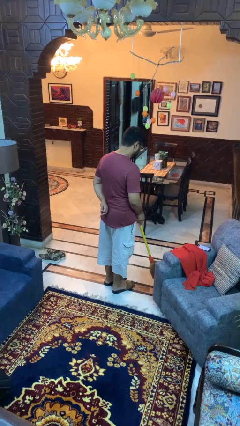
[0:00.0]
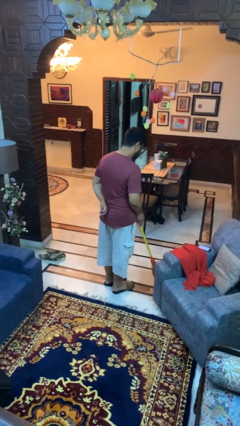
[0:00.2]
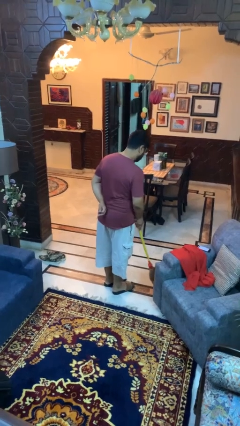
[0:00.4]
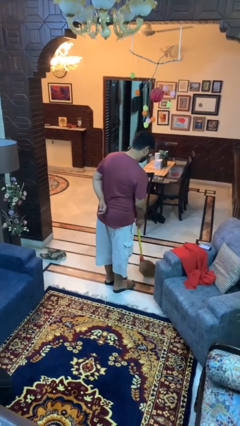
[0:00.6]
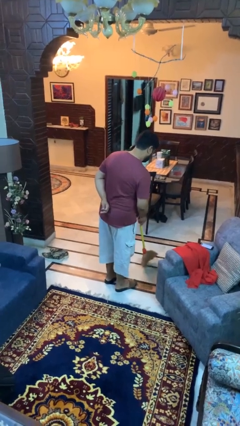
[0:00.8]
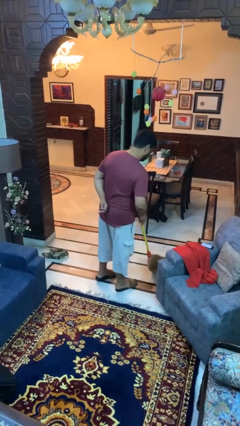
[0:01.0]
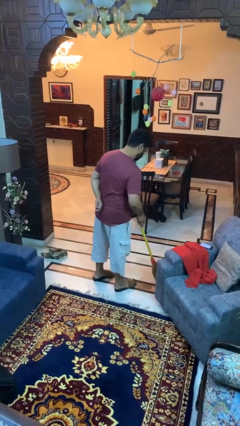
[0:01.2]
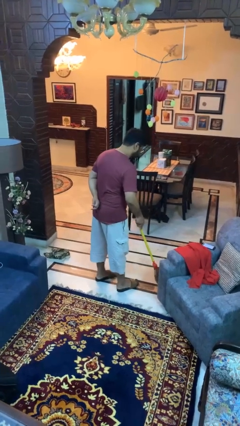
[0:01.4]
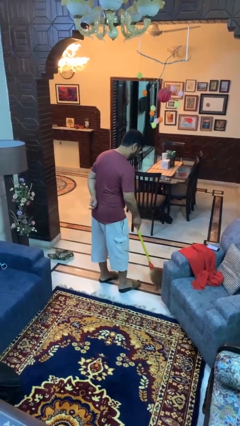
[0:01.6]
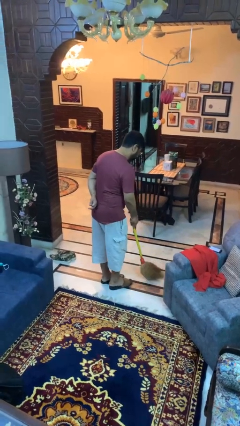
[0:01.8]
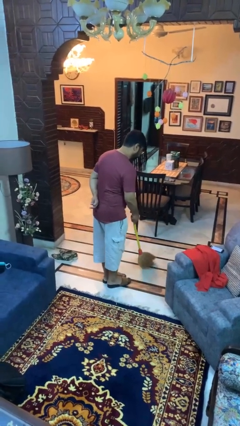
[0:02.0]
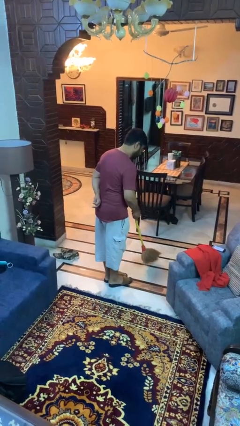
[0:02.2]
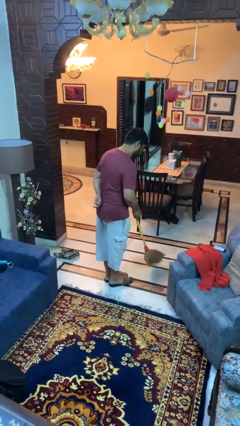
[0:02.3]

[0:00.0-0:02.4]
person sweeps floor

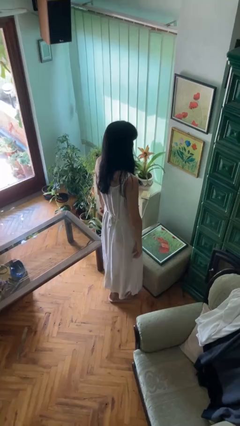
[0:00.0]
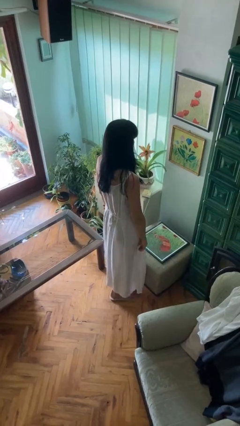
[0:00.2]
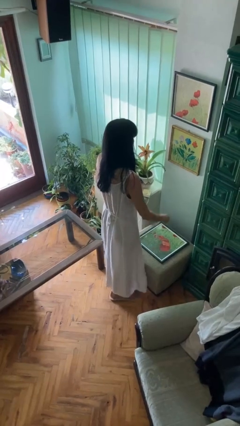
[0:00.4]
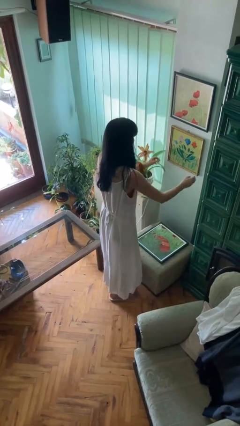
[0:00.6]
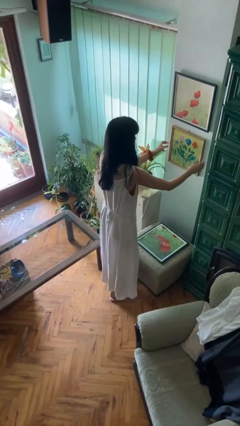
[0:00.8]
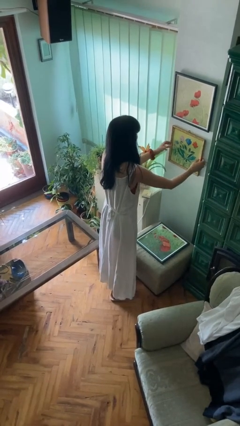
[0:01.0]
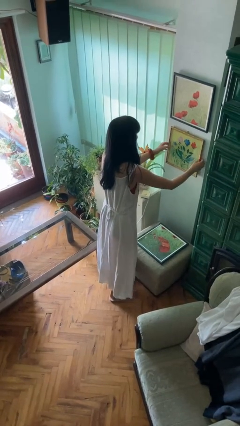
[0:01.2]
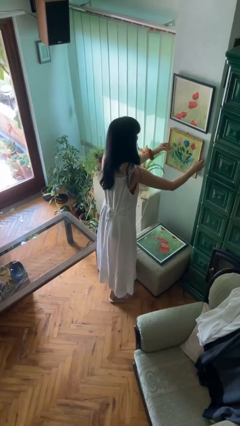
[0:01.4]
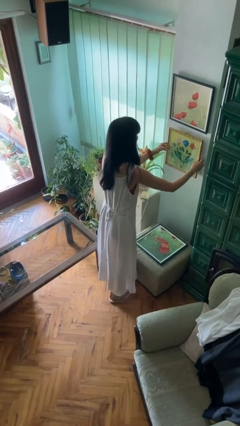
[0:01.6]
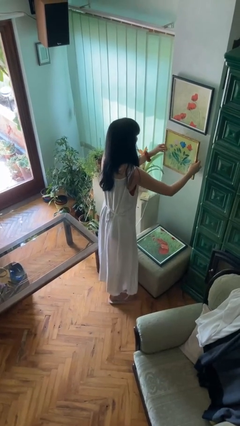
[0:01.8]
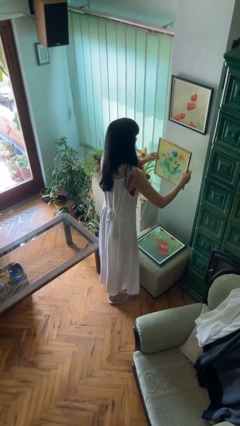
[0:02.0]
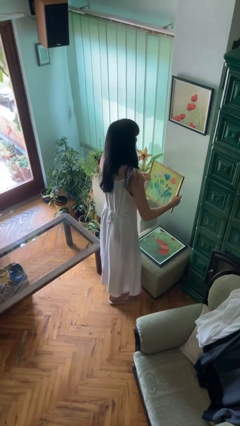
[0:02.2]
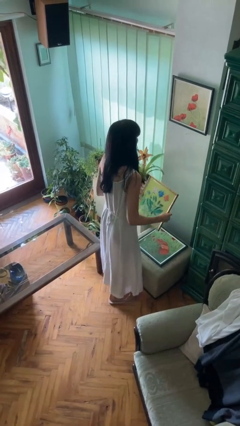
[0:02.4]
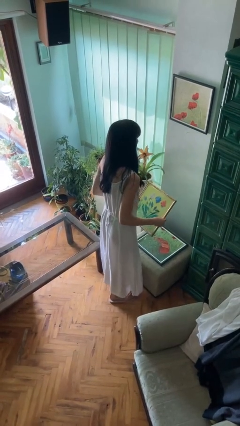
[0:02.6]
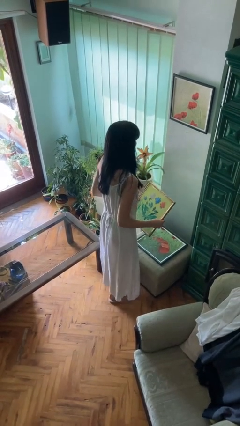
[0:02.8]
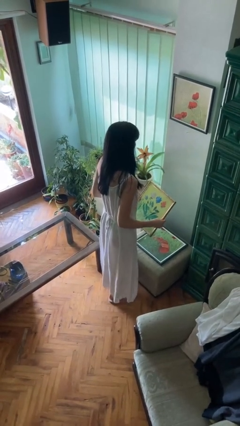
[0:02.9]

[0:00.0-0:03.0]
person takes down picture frame

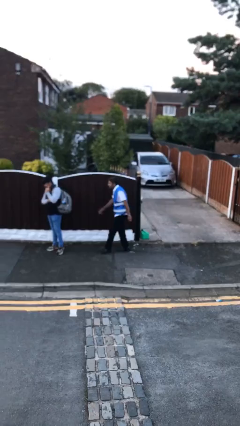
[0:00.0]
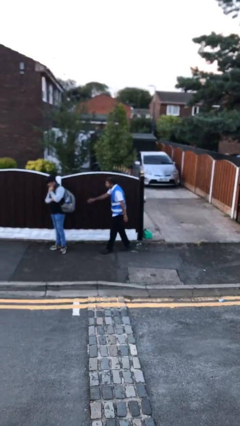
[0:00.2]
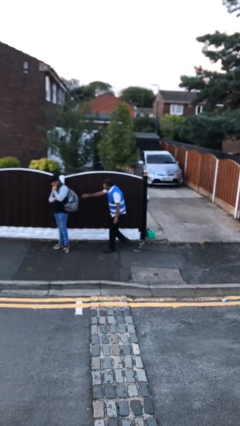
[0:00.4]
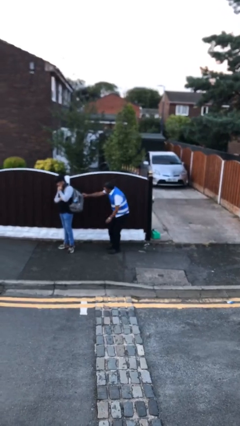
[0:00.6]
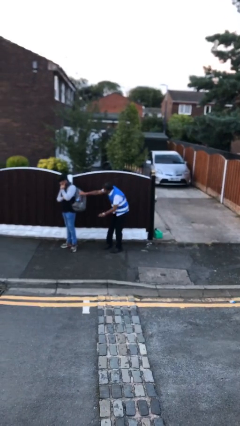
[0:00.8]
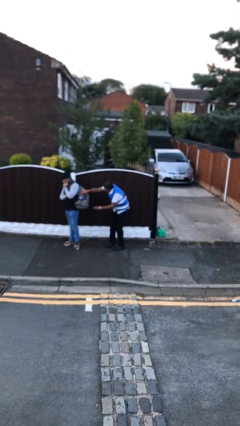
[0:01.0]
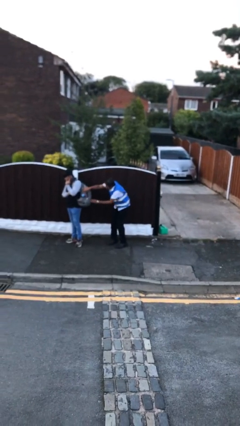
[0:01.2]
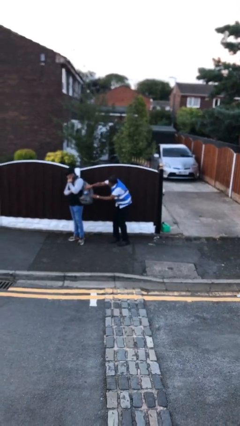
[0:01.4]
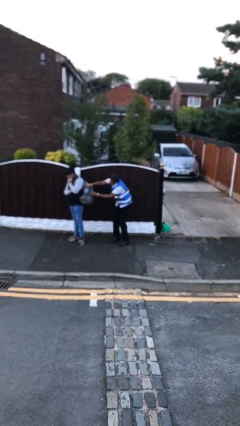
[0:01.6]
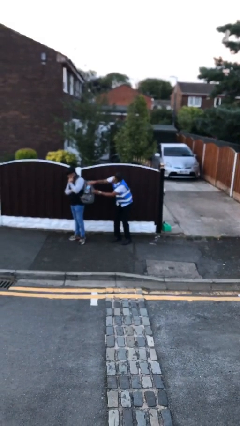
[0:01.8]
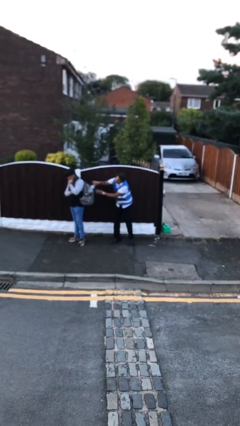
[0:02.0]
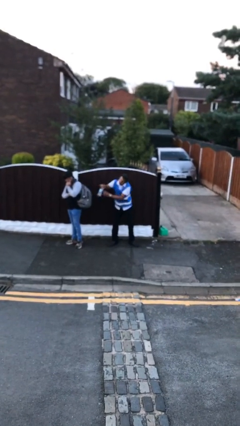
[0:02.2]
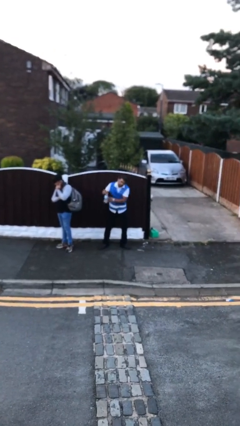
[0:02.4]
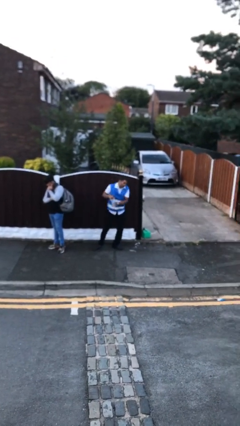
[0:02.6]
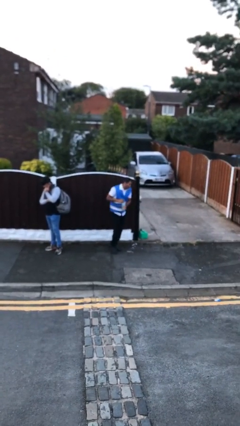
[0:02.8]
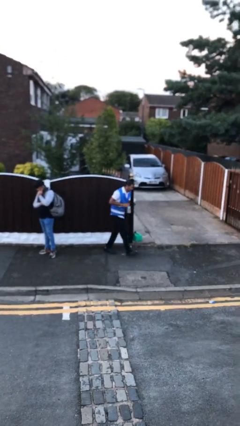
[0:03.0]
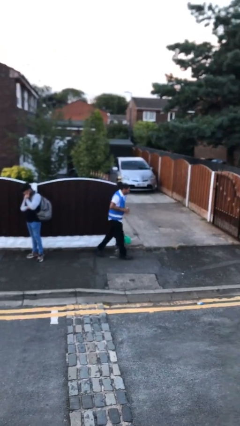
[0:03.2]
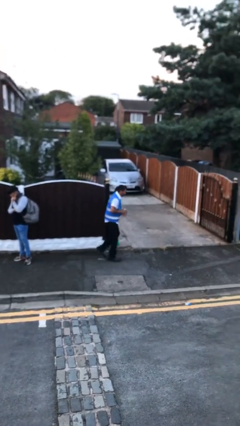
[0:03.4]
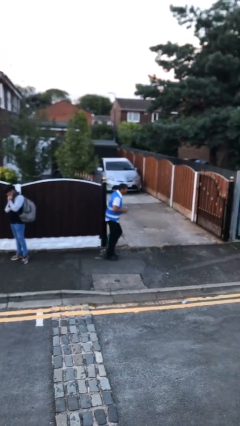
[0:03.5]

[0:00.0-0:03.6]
person steals object from person

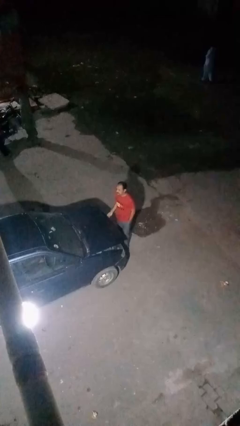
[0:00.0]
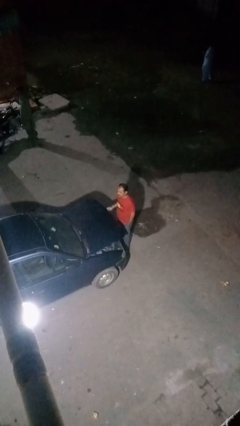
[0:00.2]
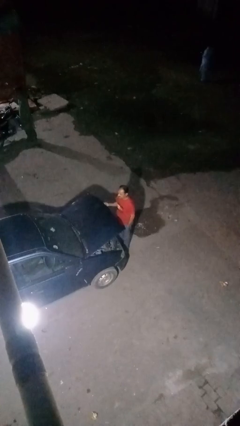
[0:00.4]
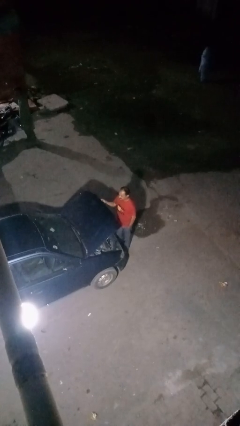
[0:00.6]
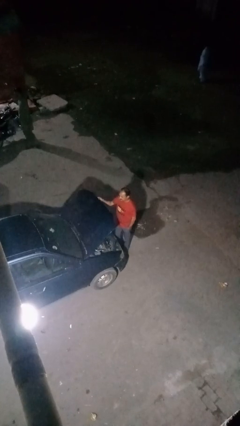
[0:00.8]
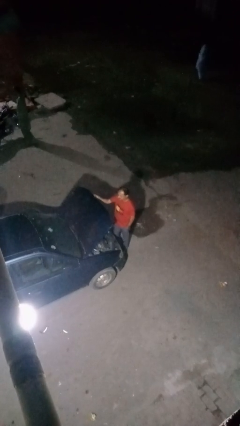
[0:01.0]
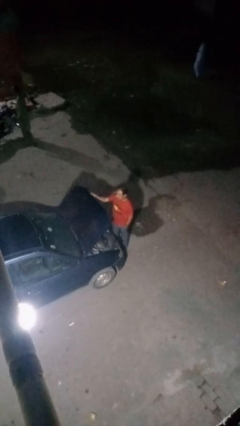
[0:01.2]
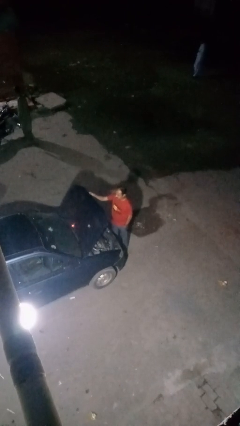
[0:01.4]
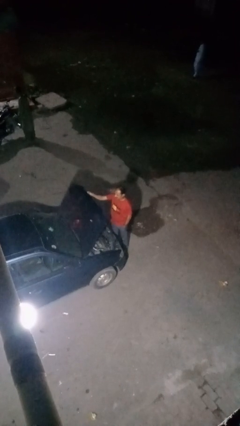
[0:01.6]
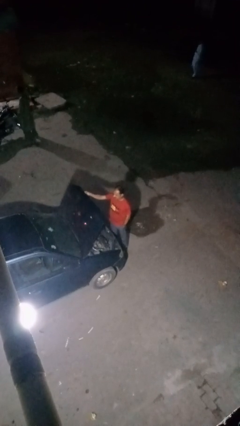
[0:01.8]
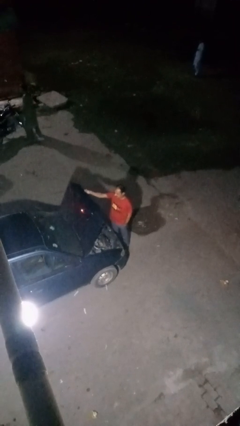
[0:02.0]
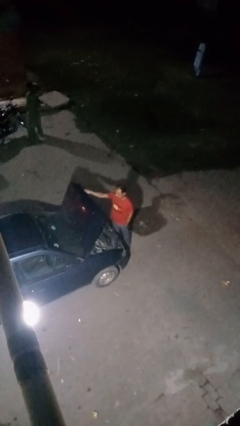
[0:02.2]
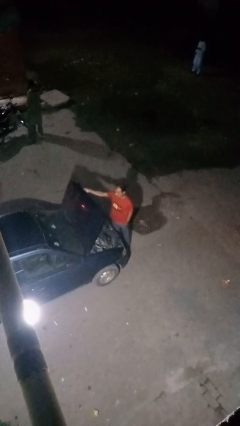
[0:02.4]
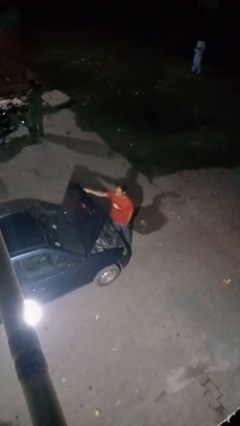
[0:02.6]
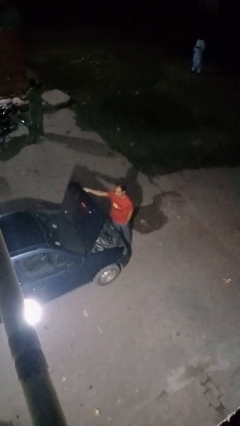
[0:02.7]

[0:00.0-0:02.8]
person opens car hood

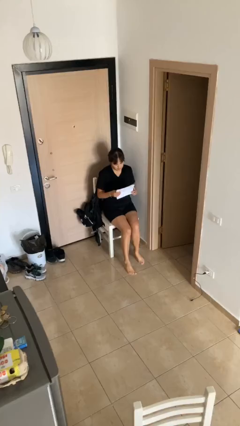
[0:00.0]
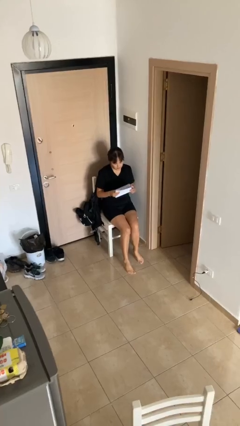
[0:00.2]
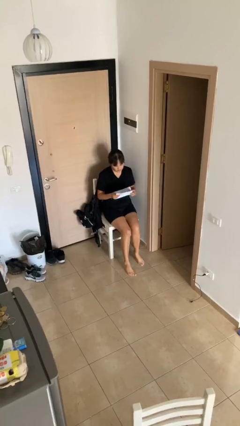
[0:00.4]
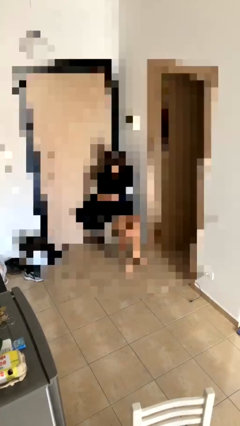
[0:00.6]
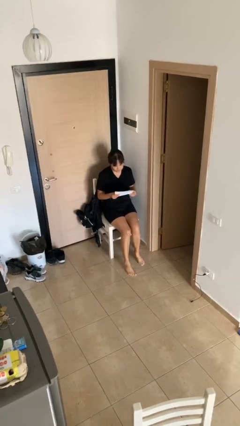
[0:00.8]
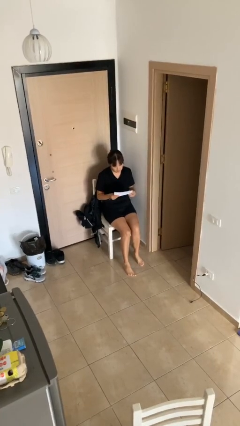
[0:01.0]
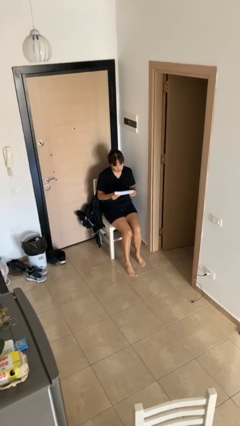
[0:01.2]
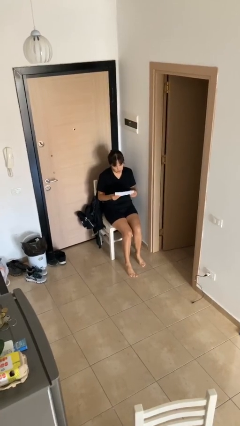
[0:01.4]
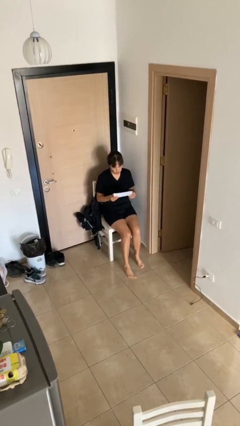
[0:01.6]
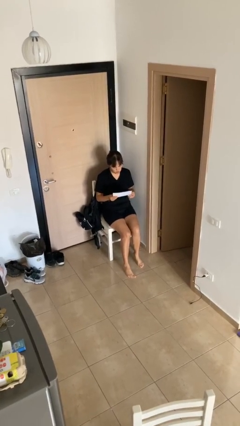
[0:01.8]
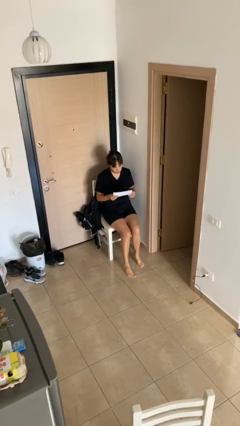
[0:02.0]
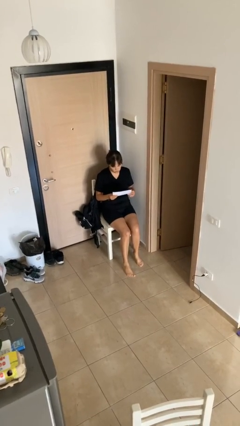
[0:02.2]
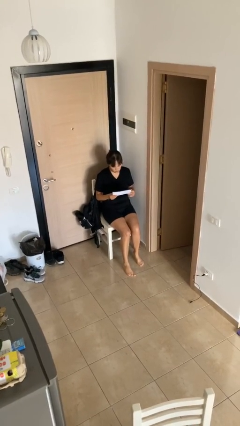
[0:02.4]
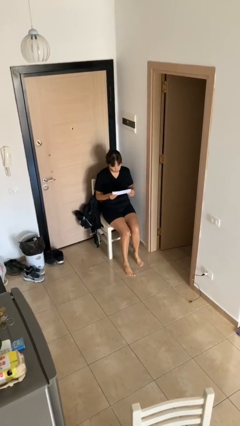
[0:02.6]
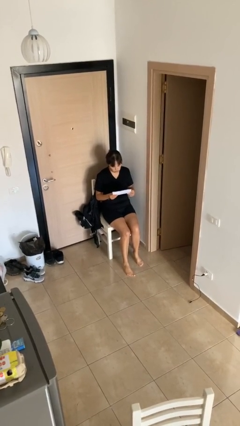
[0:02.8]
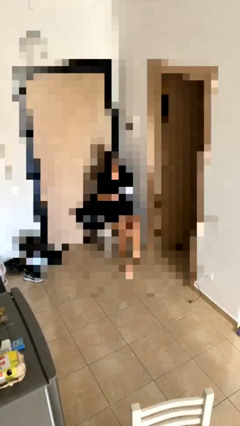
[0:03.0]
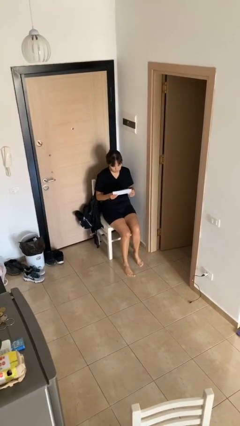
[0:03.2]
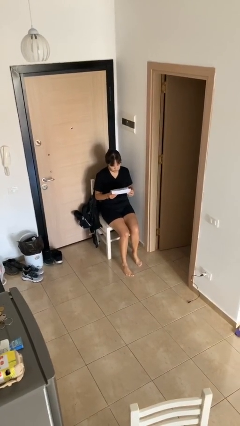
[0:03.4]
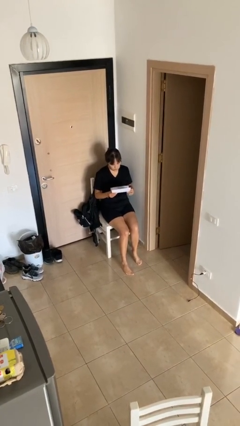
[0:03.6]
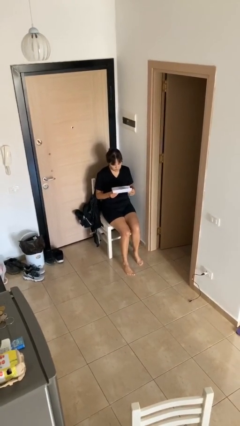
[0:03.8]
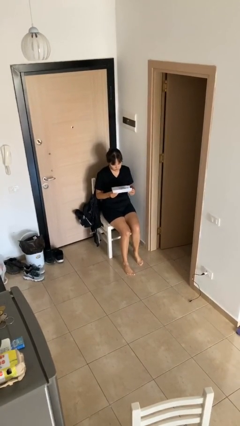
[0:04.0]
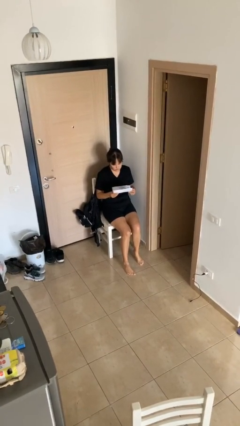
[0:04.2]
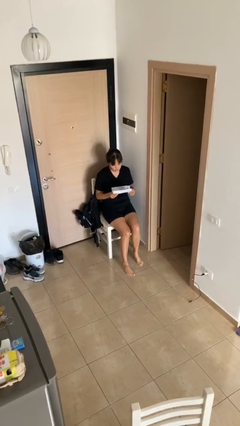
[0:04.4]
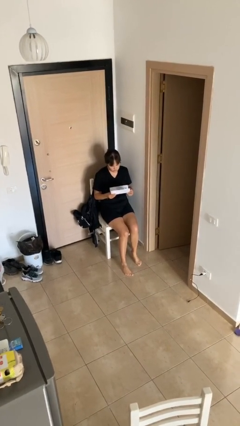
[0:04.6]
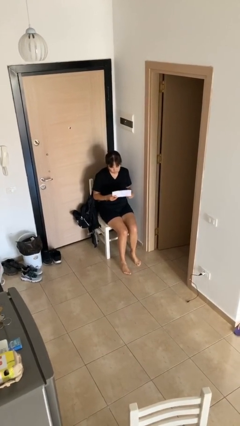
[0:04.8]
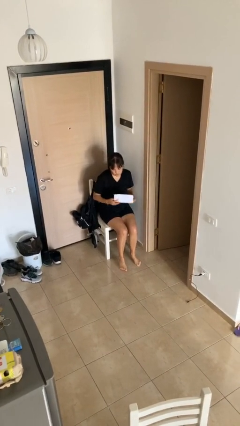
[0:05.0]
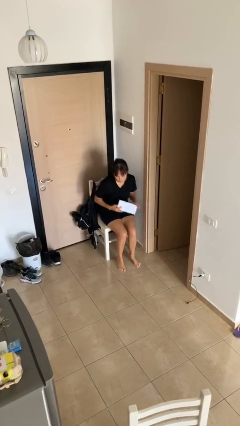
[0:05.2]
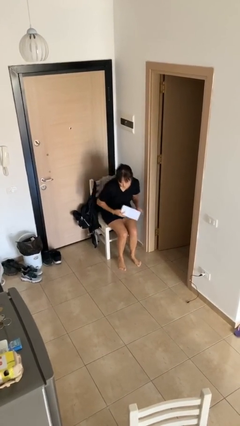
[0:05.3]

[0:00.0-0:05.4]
person reads document

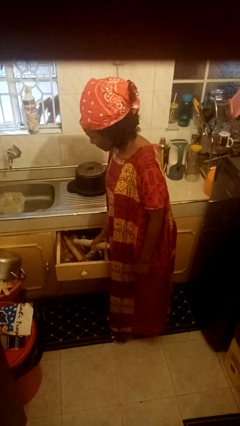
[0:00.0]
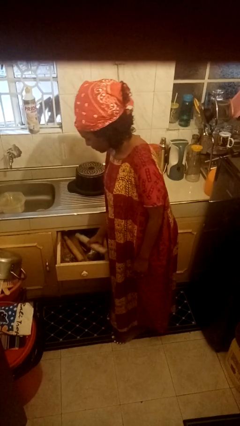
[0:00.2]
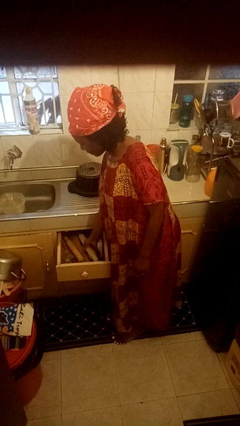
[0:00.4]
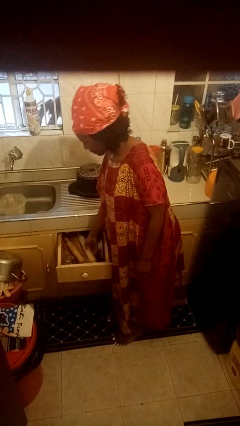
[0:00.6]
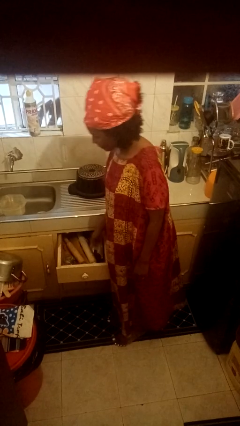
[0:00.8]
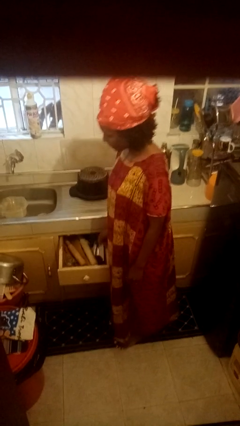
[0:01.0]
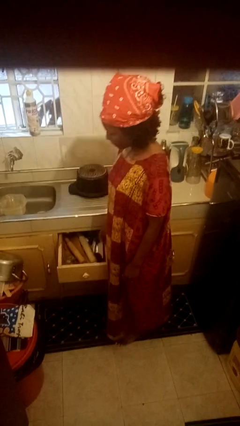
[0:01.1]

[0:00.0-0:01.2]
person puts object into kitchen drawer
